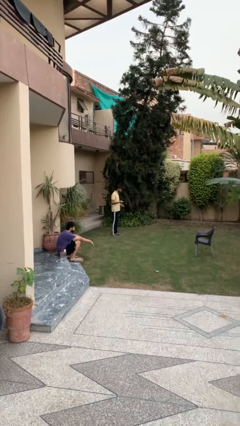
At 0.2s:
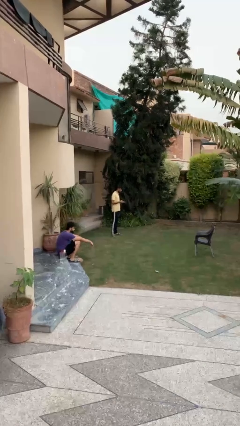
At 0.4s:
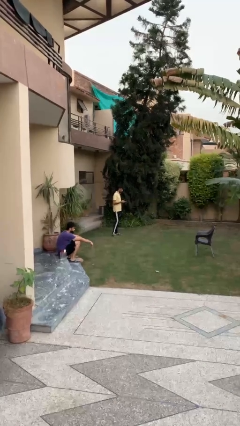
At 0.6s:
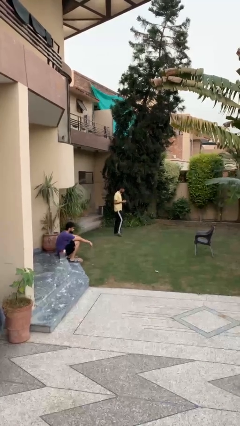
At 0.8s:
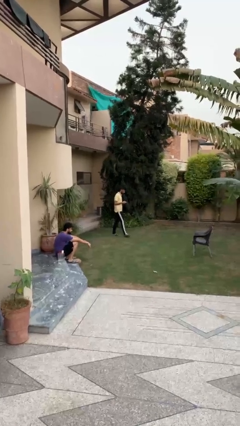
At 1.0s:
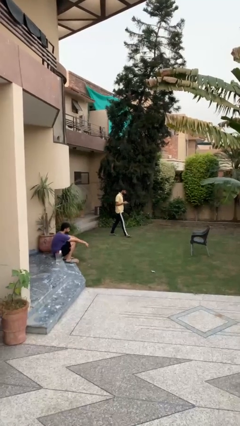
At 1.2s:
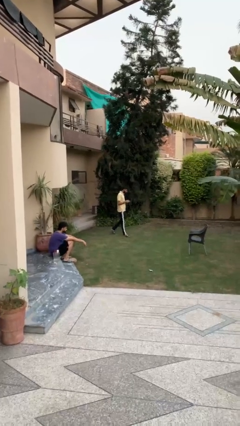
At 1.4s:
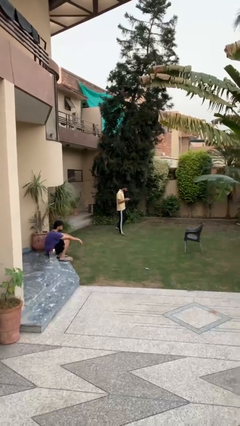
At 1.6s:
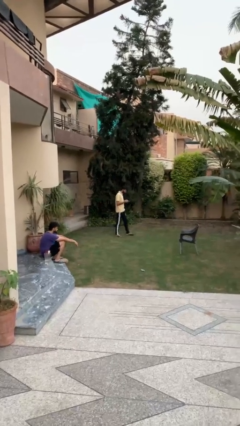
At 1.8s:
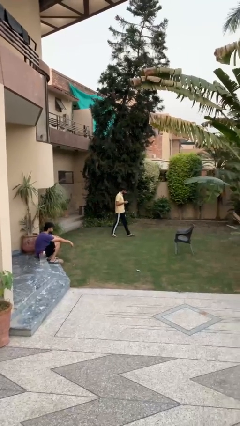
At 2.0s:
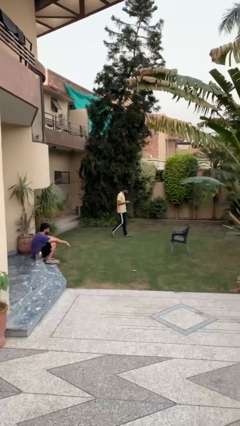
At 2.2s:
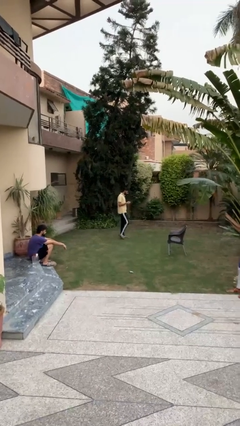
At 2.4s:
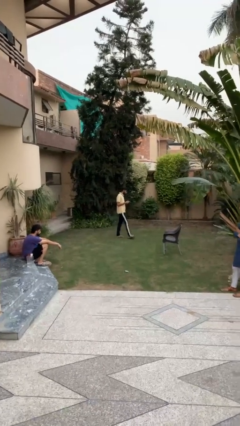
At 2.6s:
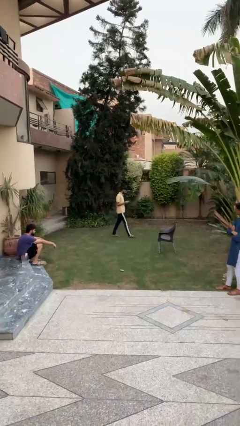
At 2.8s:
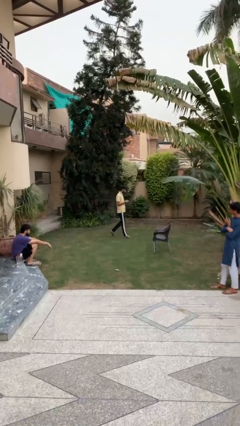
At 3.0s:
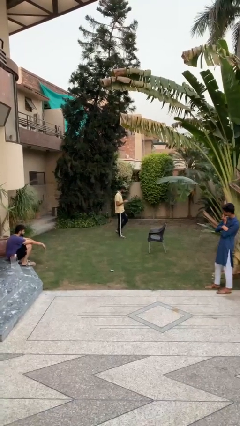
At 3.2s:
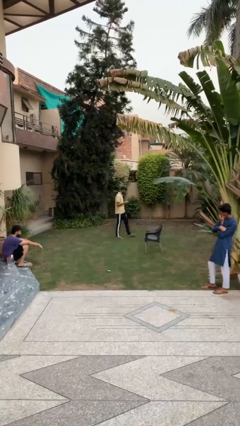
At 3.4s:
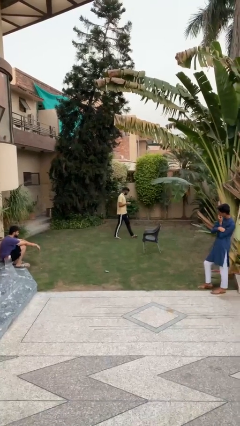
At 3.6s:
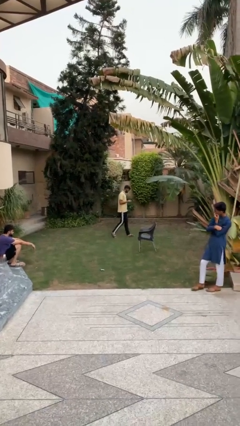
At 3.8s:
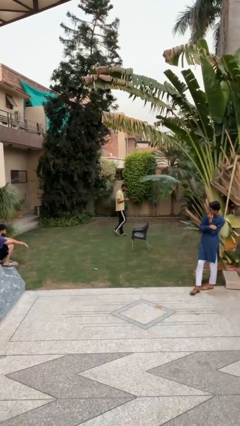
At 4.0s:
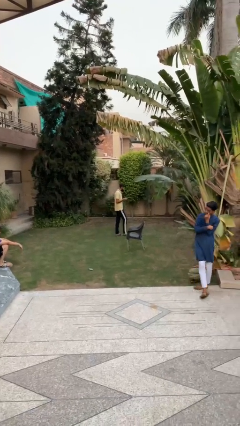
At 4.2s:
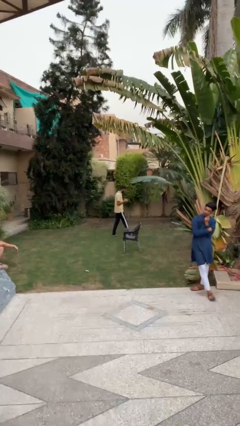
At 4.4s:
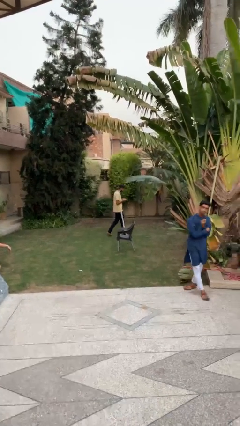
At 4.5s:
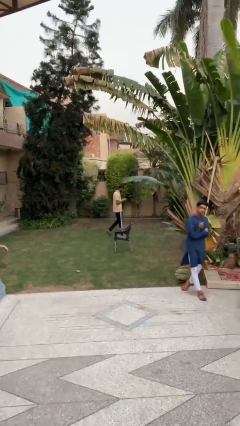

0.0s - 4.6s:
person texts on phone

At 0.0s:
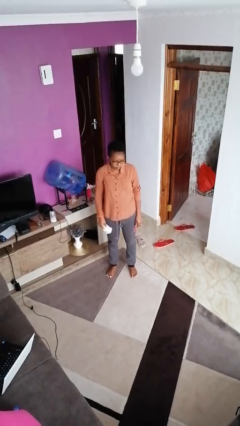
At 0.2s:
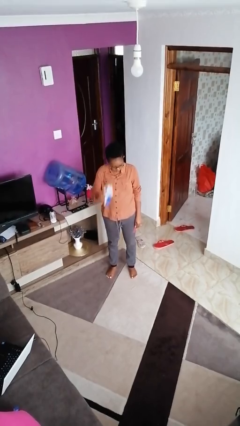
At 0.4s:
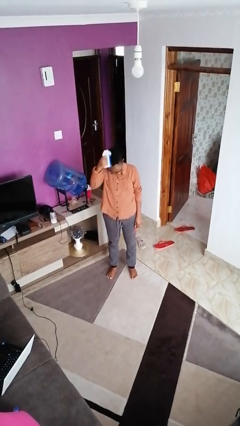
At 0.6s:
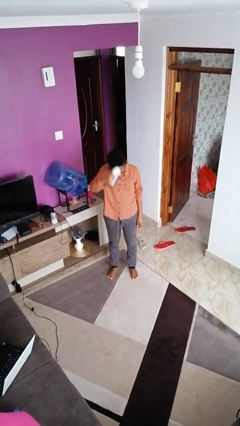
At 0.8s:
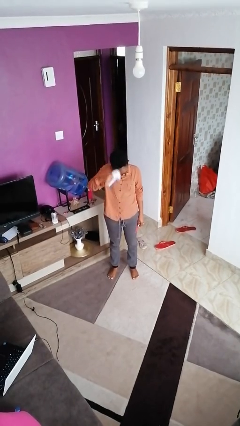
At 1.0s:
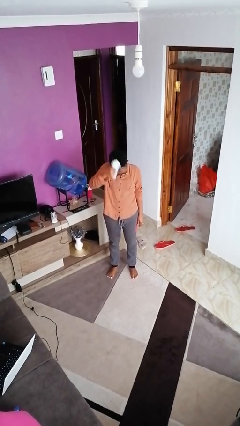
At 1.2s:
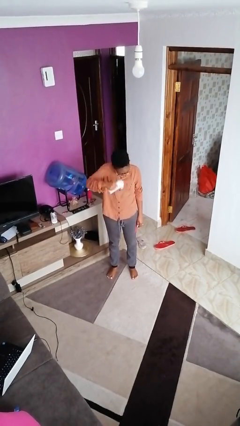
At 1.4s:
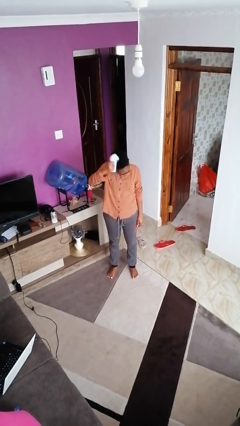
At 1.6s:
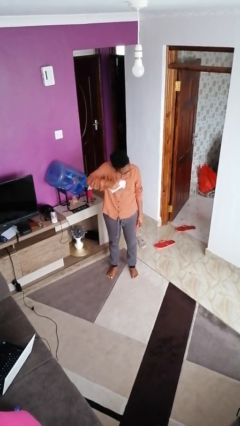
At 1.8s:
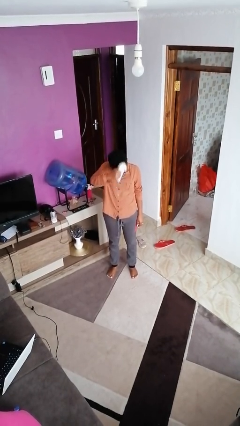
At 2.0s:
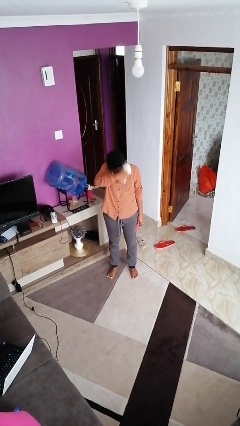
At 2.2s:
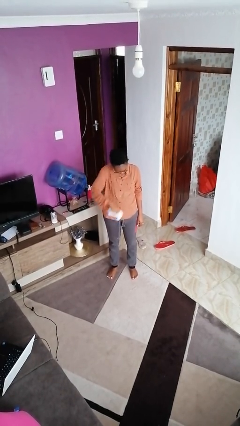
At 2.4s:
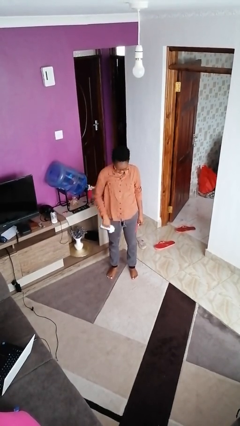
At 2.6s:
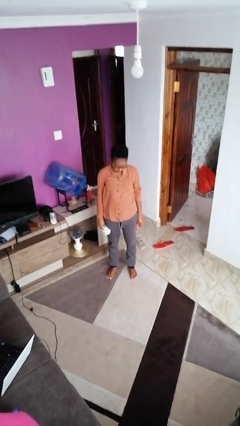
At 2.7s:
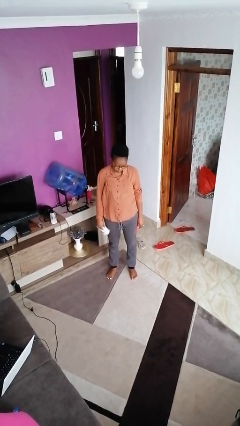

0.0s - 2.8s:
person brushes hair

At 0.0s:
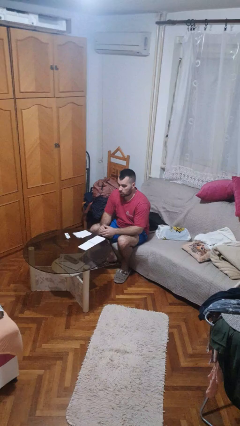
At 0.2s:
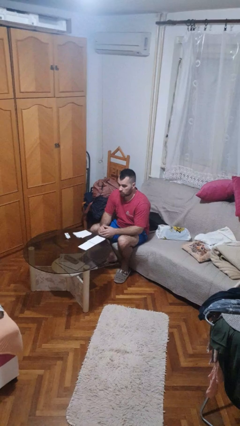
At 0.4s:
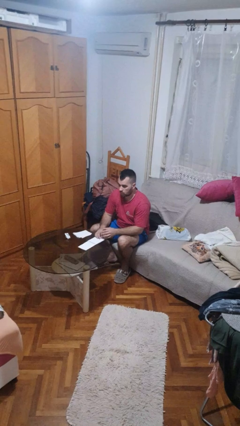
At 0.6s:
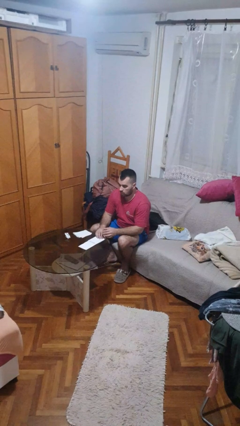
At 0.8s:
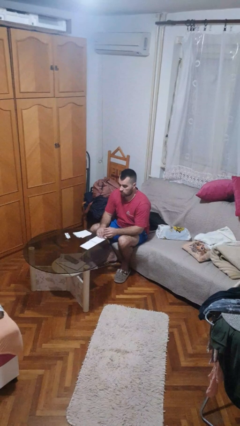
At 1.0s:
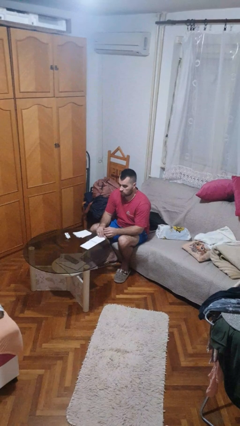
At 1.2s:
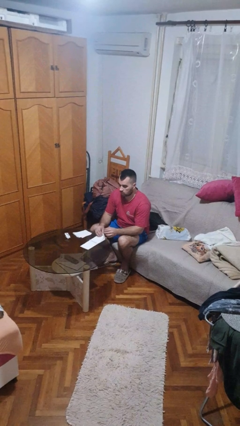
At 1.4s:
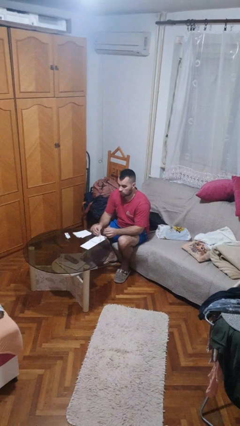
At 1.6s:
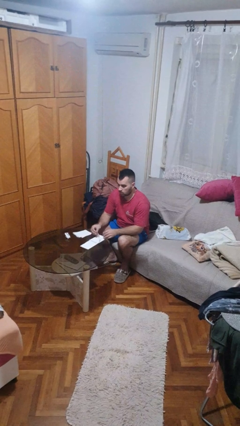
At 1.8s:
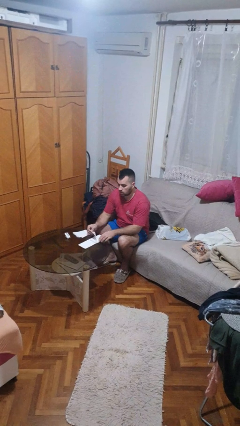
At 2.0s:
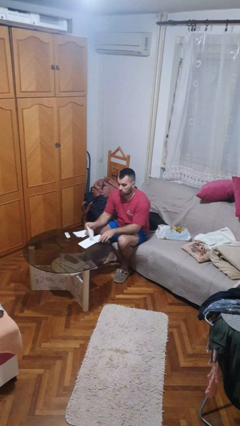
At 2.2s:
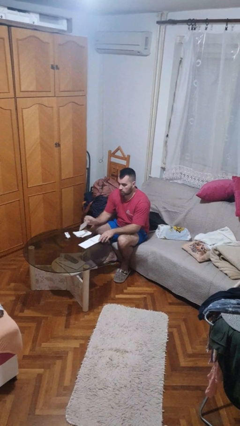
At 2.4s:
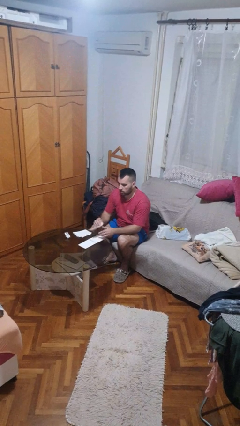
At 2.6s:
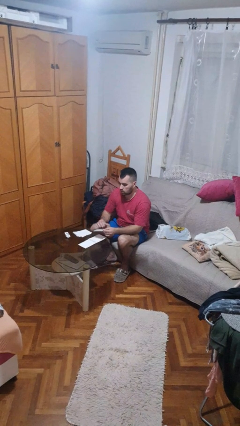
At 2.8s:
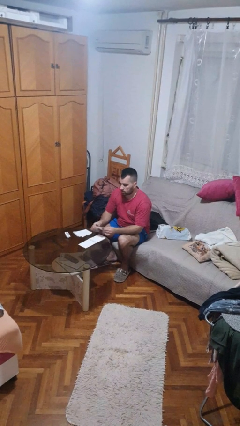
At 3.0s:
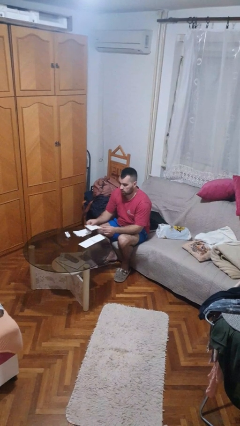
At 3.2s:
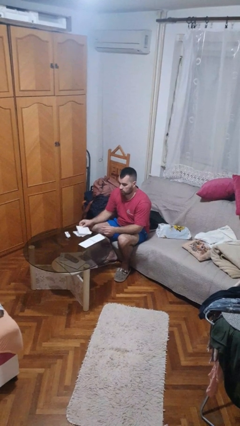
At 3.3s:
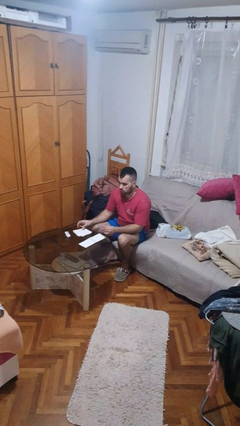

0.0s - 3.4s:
person tears paper

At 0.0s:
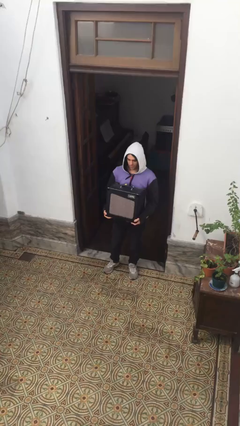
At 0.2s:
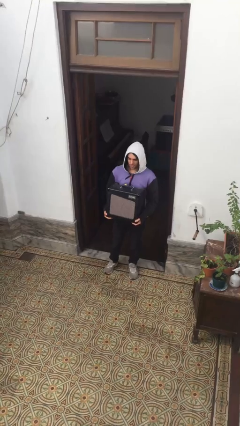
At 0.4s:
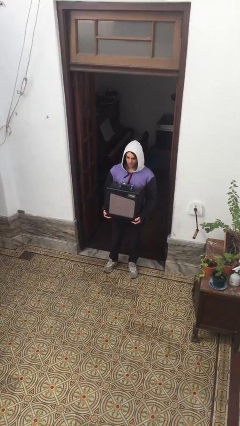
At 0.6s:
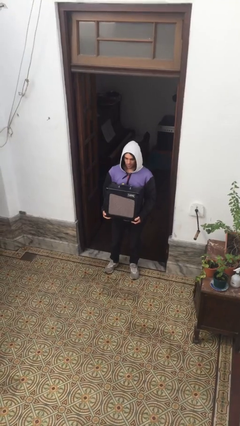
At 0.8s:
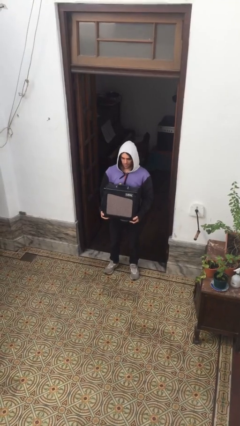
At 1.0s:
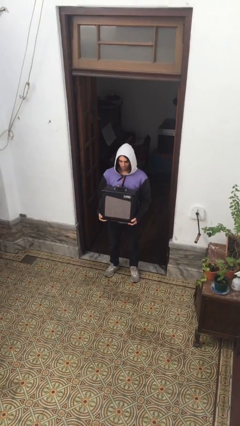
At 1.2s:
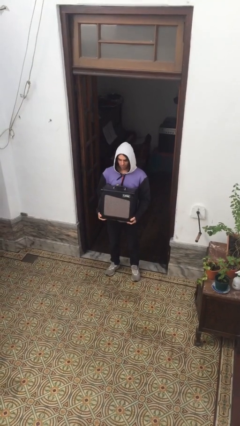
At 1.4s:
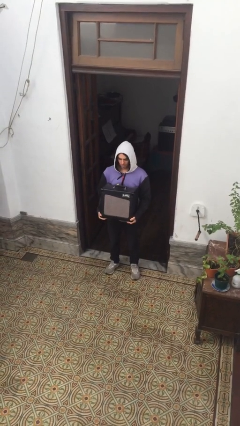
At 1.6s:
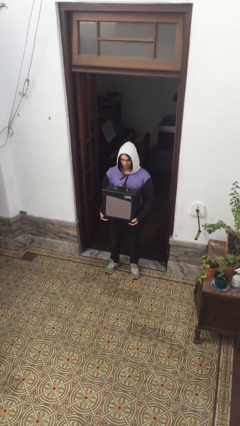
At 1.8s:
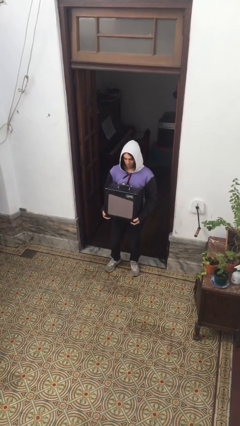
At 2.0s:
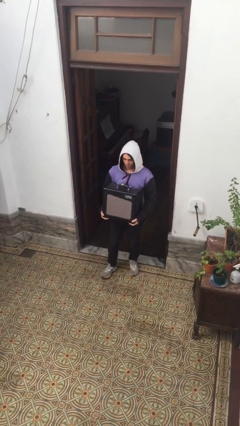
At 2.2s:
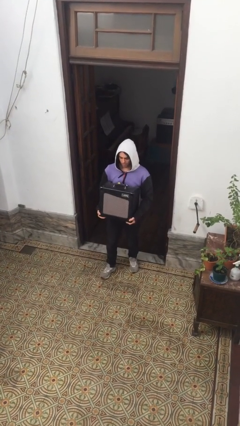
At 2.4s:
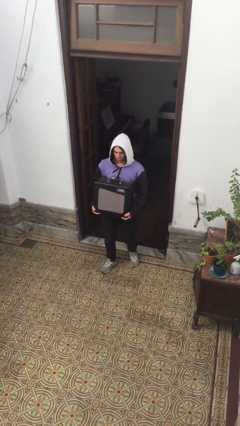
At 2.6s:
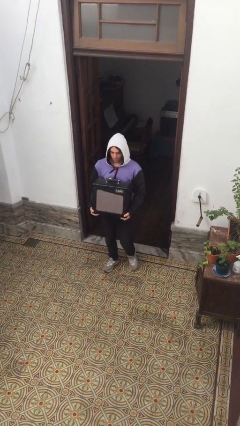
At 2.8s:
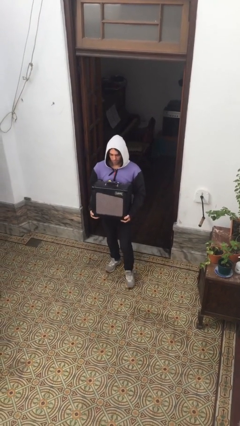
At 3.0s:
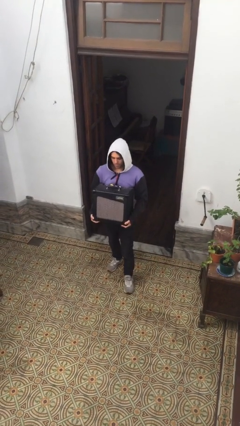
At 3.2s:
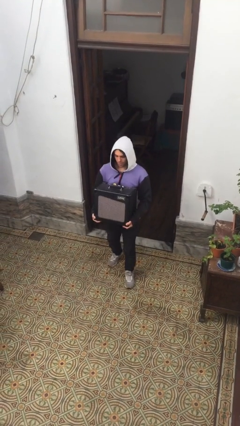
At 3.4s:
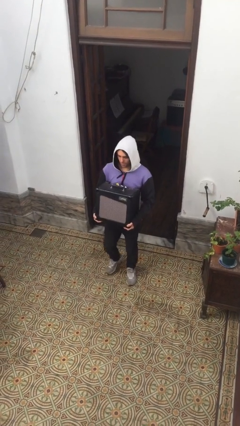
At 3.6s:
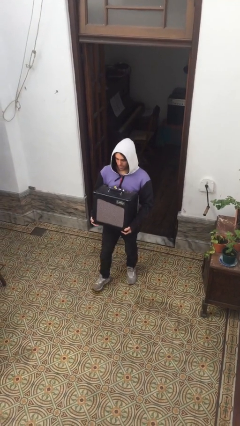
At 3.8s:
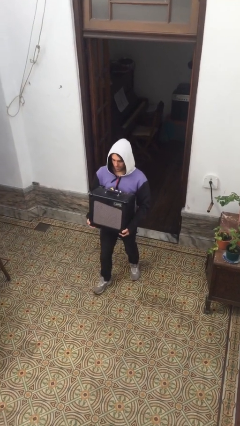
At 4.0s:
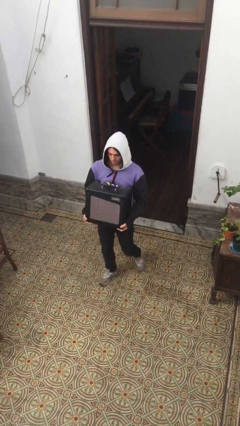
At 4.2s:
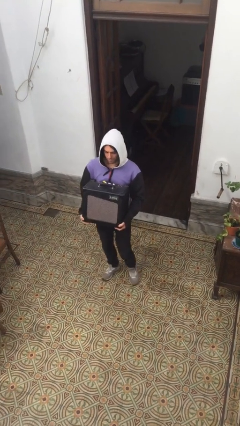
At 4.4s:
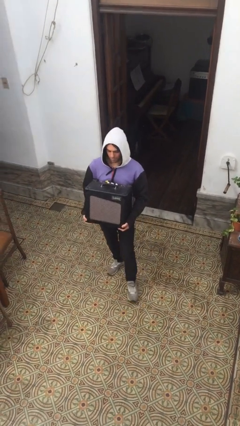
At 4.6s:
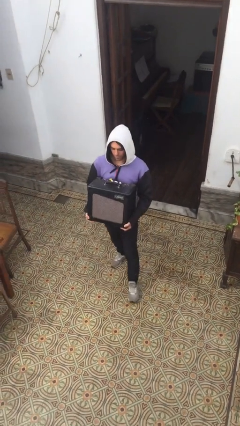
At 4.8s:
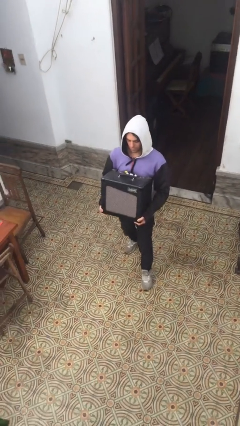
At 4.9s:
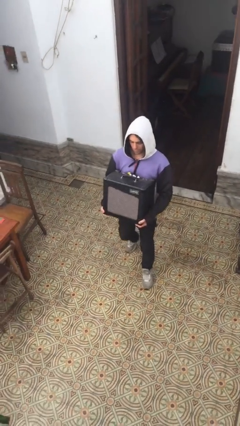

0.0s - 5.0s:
person carries heavy object

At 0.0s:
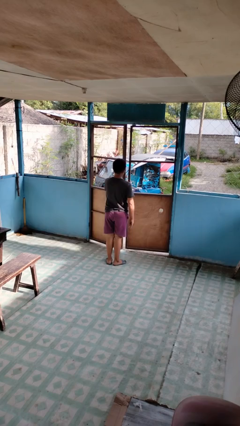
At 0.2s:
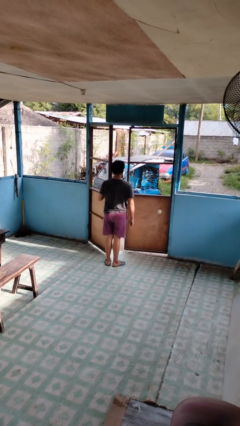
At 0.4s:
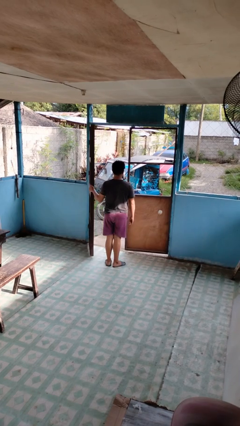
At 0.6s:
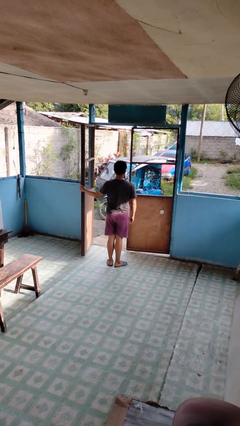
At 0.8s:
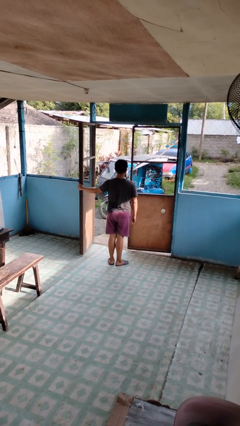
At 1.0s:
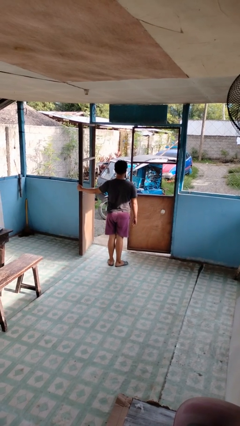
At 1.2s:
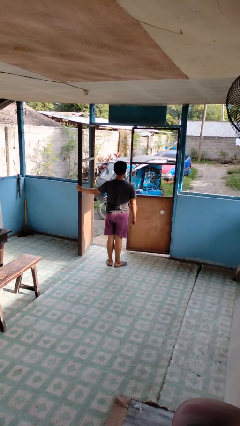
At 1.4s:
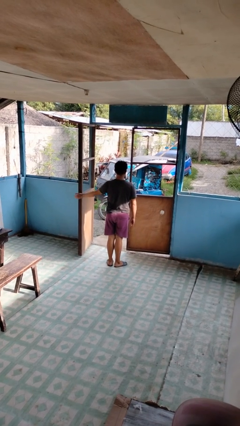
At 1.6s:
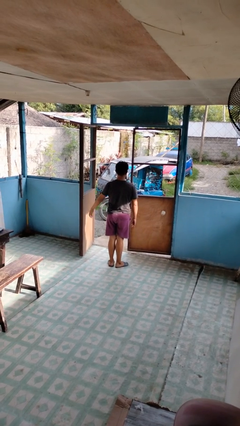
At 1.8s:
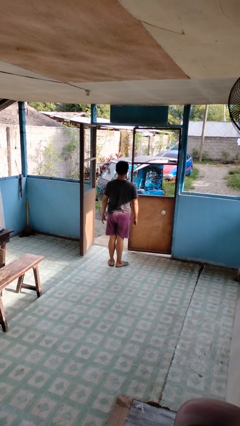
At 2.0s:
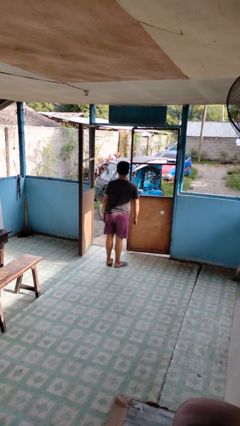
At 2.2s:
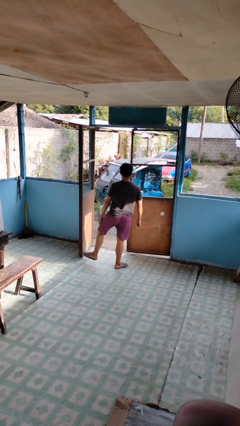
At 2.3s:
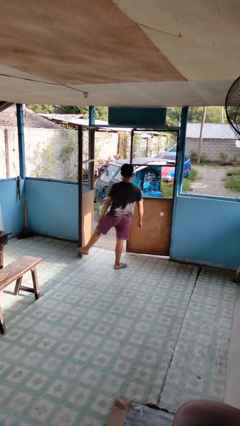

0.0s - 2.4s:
person opens facility door
